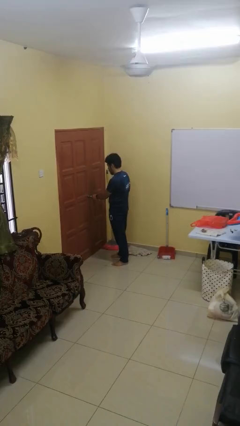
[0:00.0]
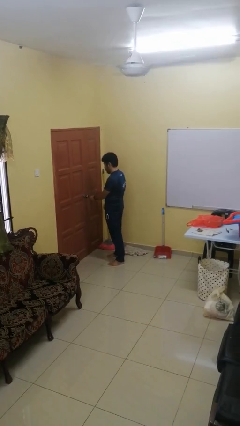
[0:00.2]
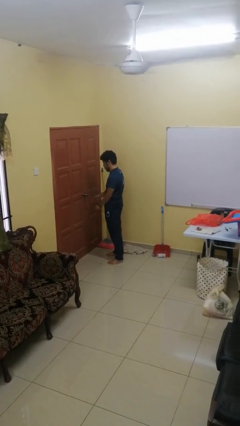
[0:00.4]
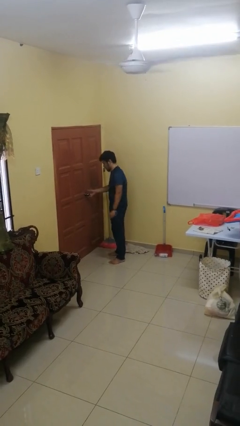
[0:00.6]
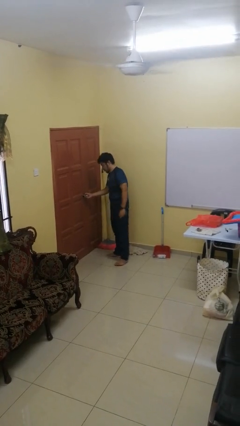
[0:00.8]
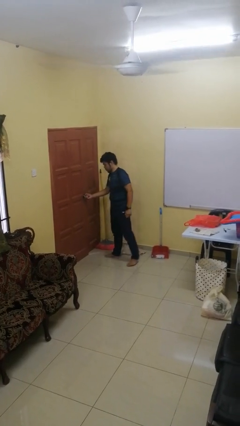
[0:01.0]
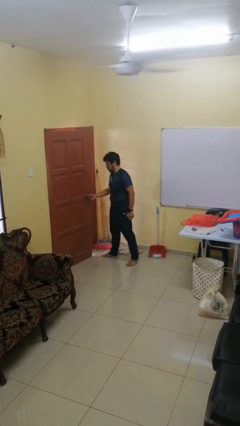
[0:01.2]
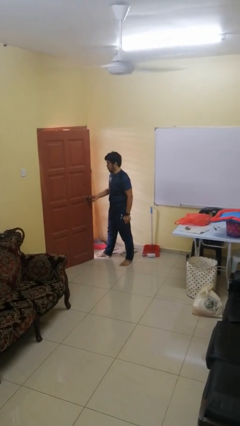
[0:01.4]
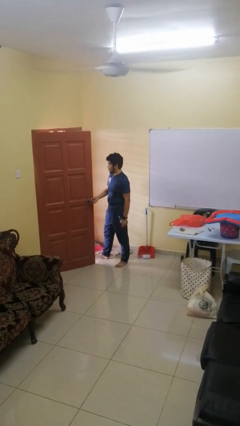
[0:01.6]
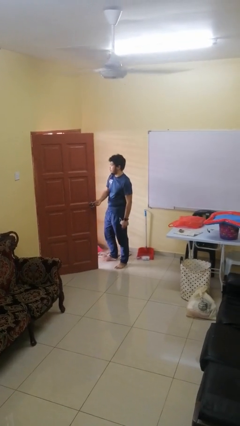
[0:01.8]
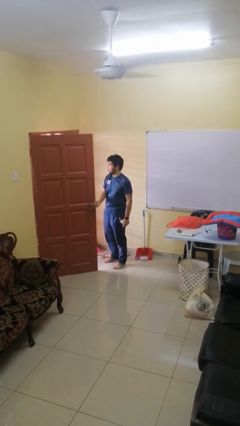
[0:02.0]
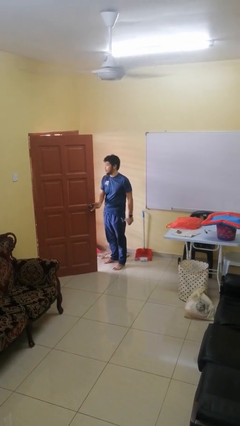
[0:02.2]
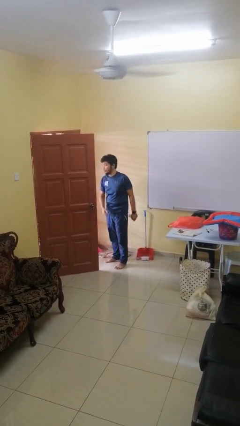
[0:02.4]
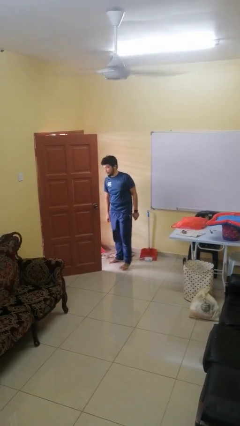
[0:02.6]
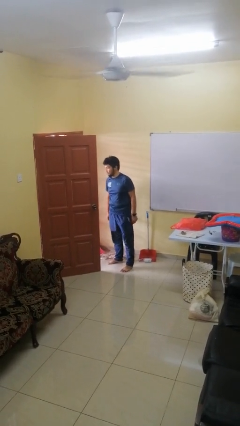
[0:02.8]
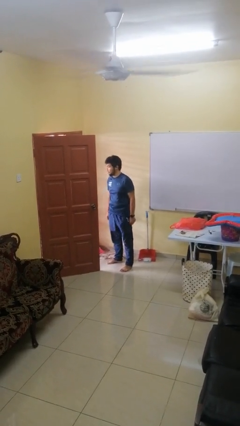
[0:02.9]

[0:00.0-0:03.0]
person opens facility door

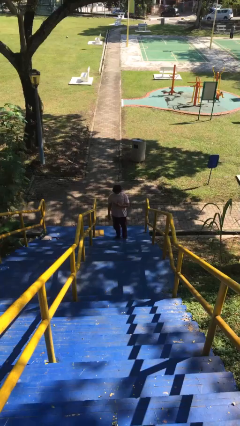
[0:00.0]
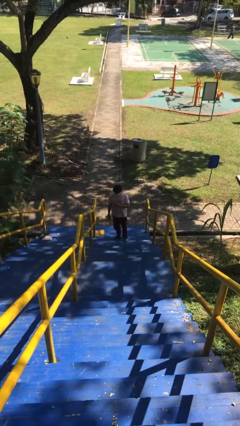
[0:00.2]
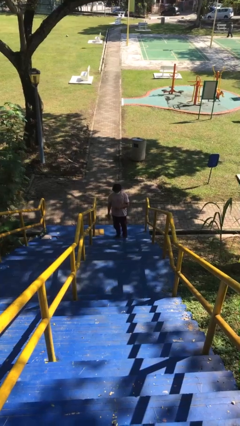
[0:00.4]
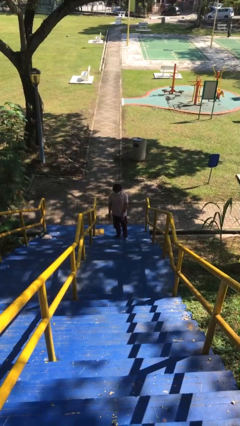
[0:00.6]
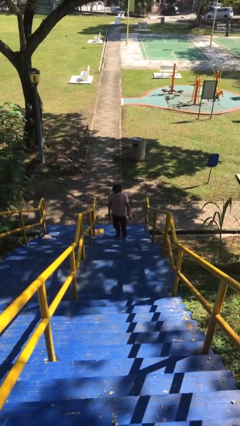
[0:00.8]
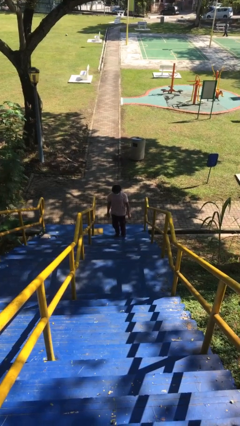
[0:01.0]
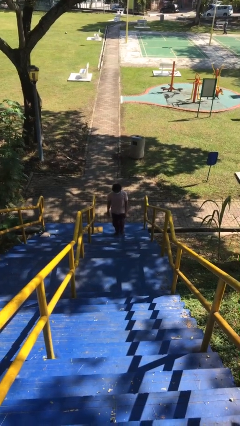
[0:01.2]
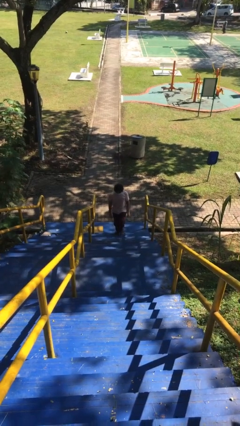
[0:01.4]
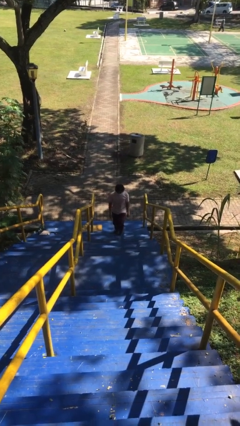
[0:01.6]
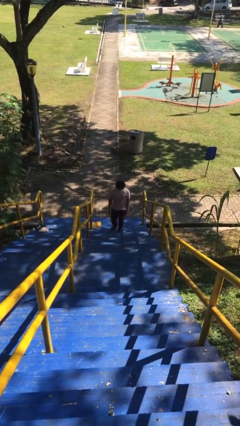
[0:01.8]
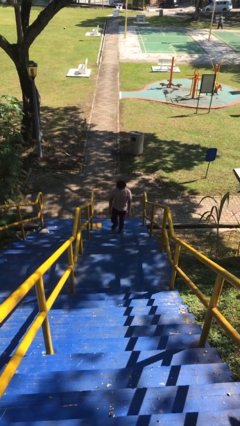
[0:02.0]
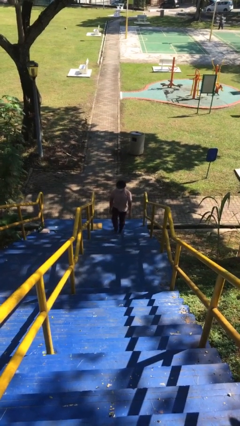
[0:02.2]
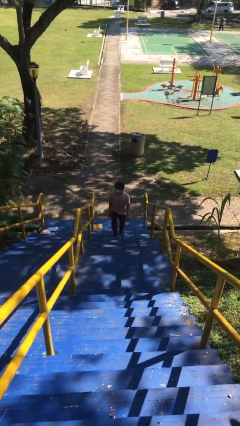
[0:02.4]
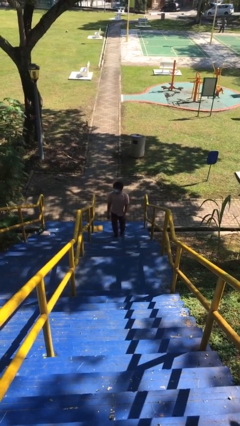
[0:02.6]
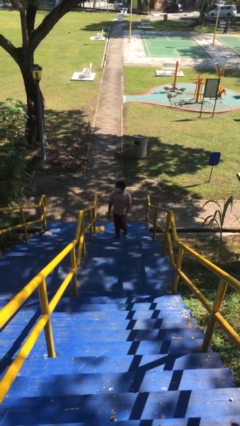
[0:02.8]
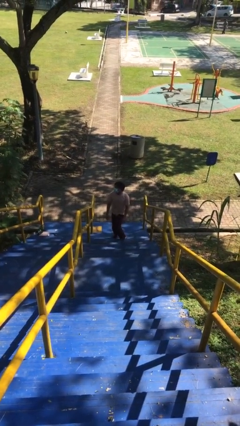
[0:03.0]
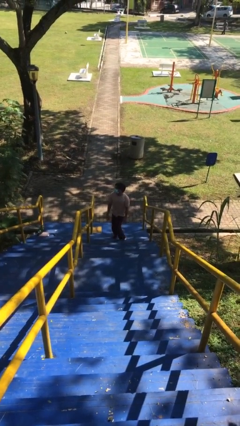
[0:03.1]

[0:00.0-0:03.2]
person climbs up stairs

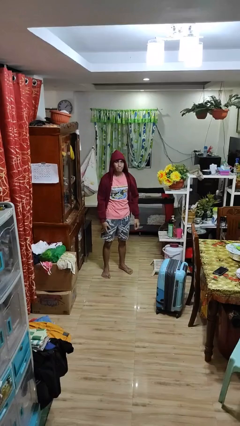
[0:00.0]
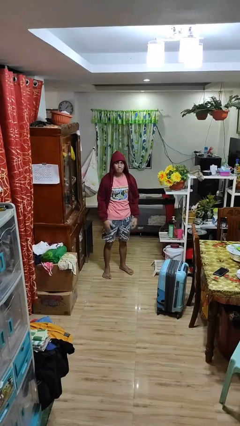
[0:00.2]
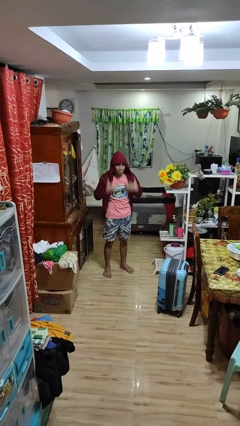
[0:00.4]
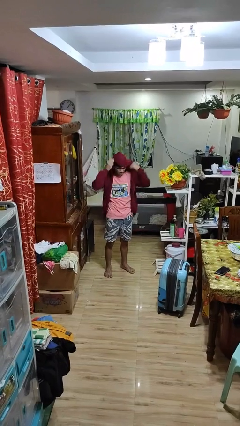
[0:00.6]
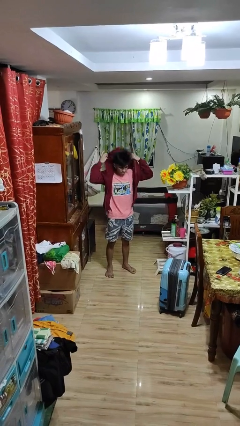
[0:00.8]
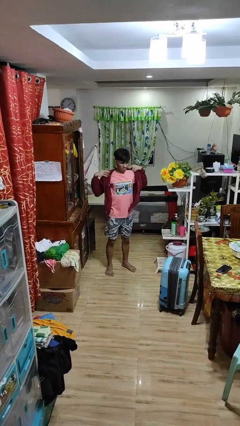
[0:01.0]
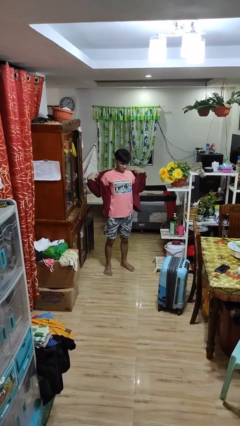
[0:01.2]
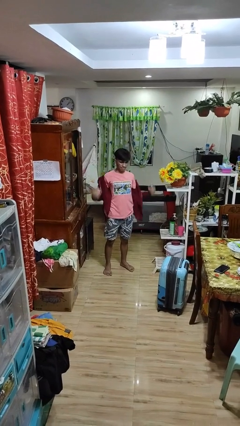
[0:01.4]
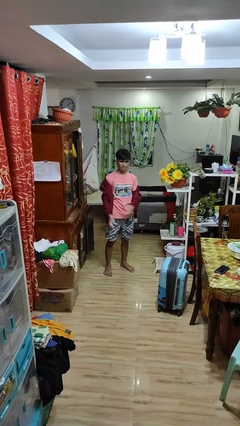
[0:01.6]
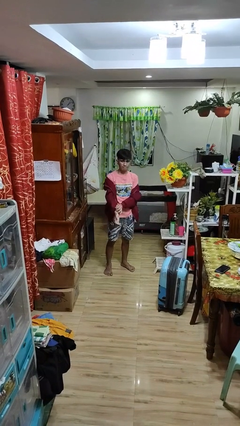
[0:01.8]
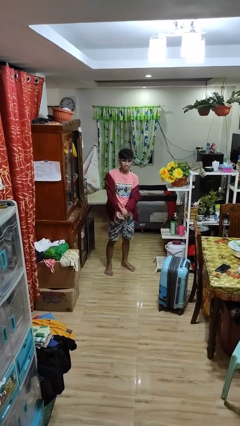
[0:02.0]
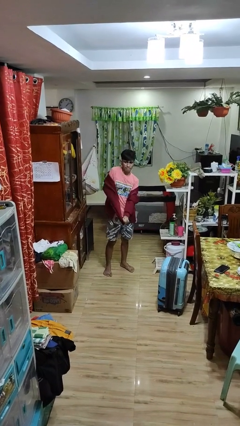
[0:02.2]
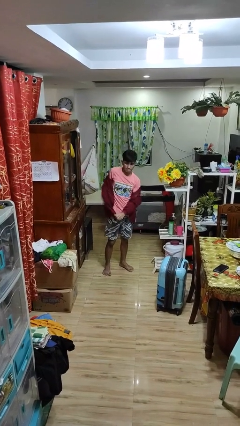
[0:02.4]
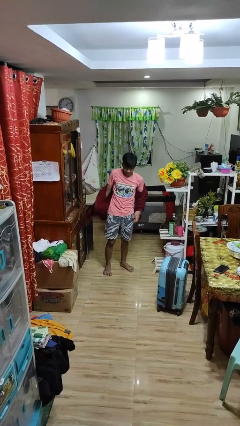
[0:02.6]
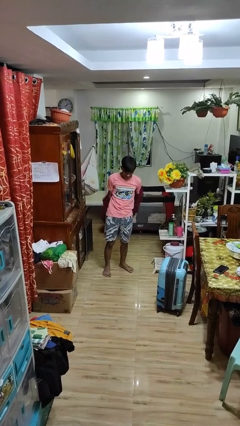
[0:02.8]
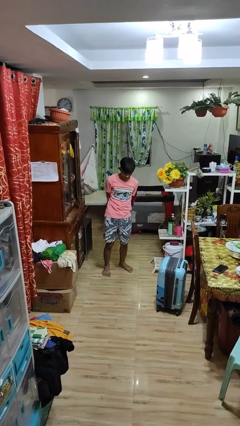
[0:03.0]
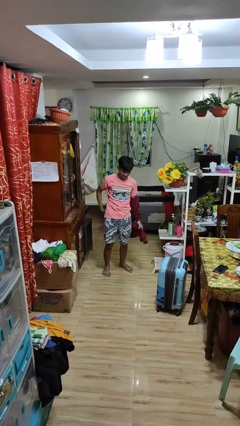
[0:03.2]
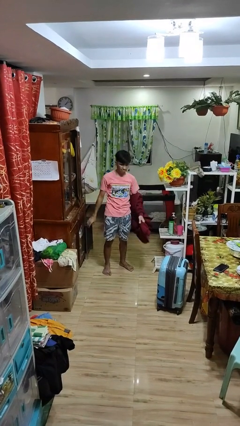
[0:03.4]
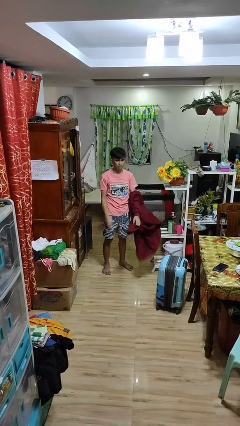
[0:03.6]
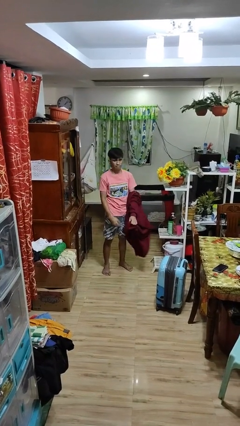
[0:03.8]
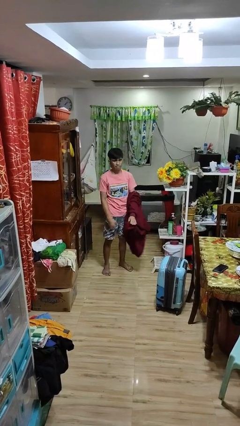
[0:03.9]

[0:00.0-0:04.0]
person takes off hoodie

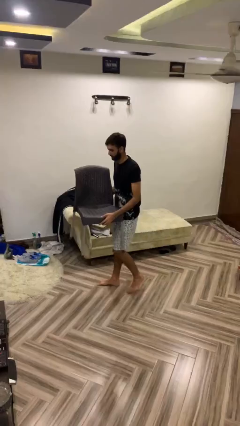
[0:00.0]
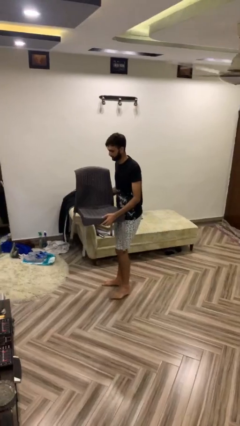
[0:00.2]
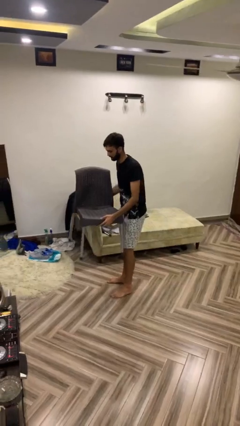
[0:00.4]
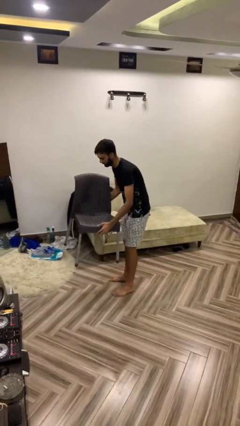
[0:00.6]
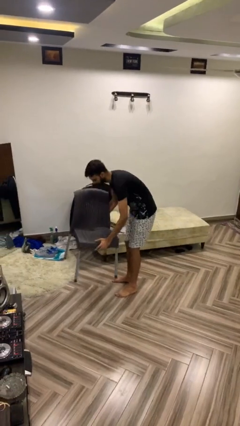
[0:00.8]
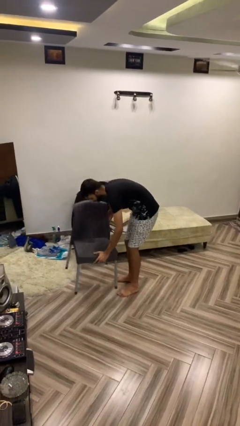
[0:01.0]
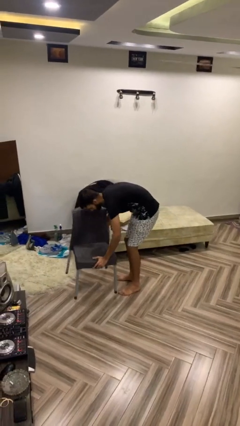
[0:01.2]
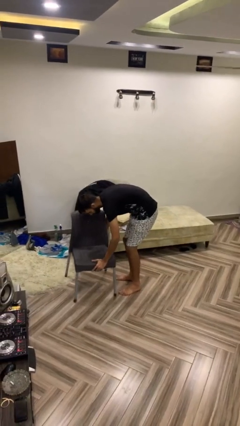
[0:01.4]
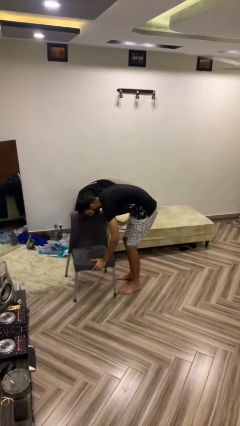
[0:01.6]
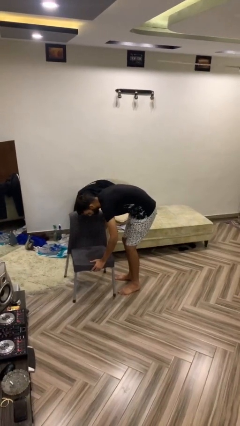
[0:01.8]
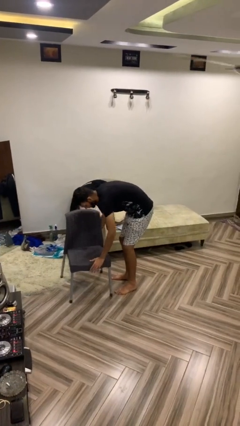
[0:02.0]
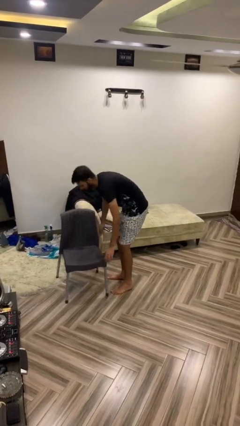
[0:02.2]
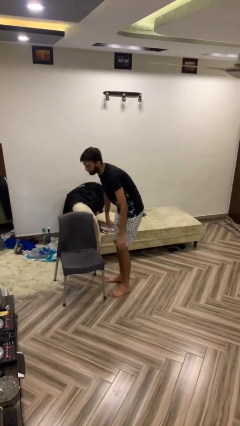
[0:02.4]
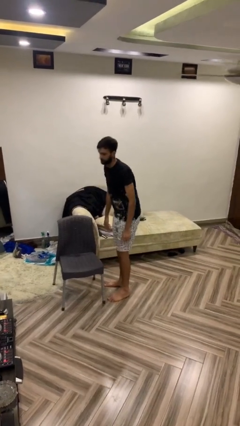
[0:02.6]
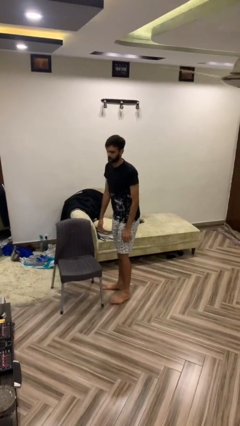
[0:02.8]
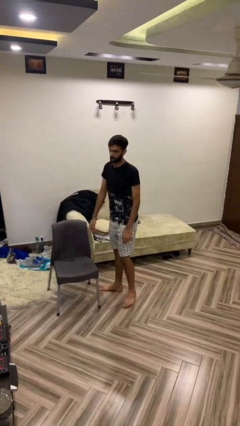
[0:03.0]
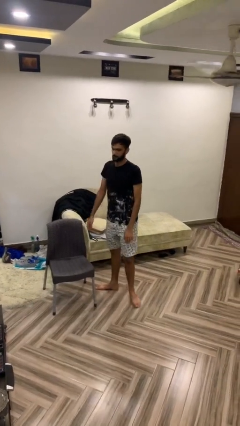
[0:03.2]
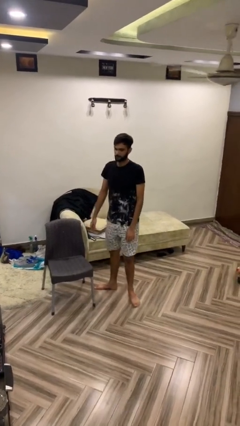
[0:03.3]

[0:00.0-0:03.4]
person puts down object on floor

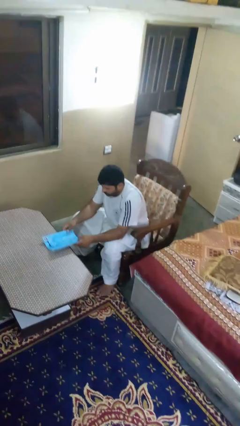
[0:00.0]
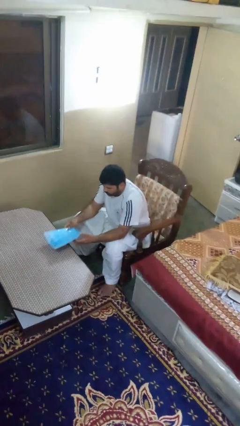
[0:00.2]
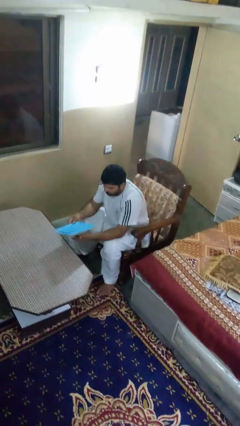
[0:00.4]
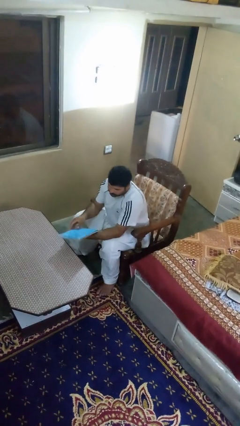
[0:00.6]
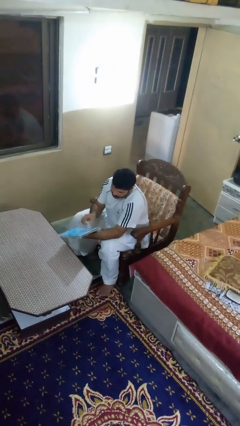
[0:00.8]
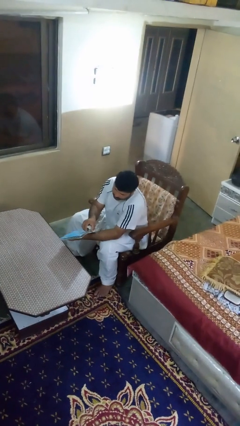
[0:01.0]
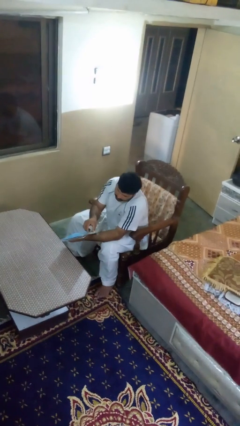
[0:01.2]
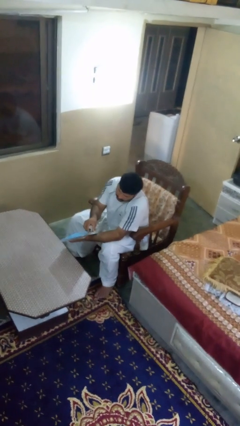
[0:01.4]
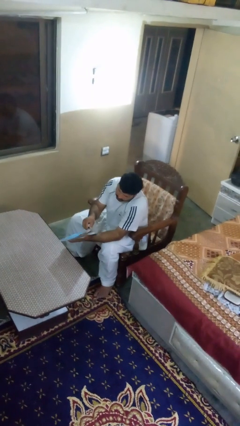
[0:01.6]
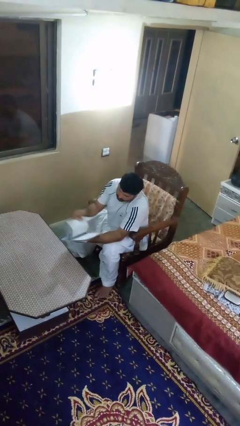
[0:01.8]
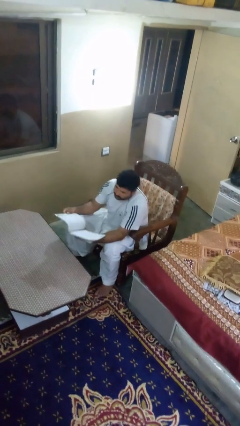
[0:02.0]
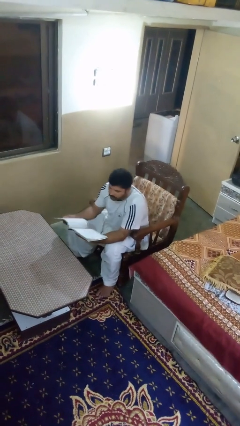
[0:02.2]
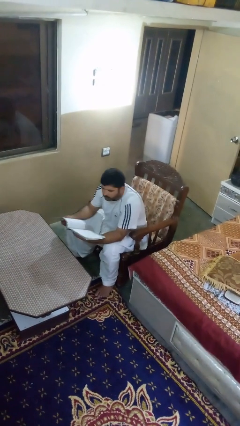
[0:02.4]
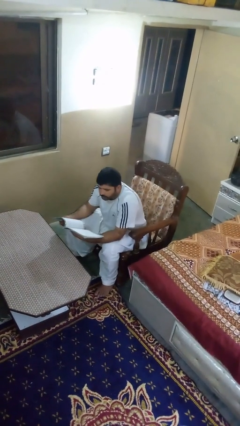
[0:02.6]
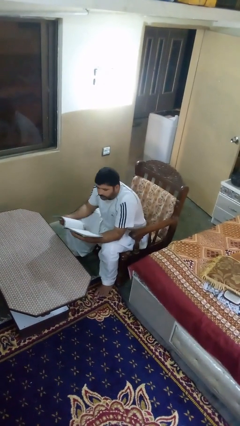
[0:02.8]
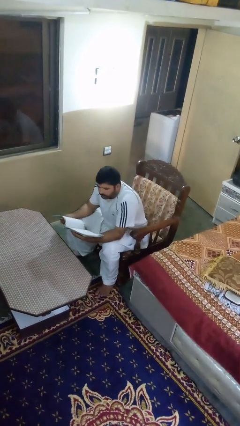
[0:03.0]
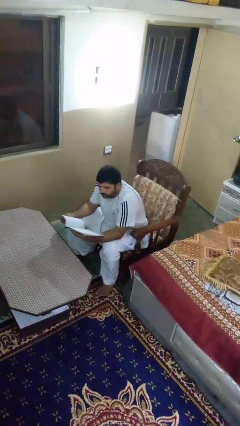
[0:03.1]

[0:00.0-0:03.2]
person reads magazine

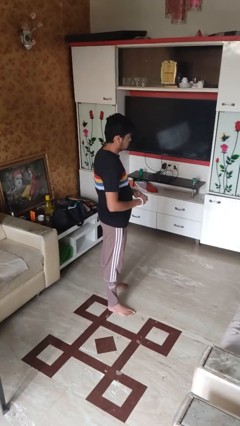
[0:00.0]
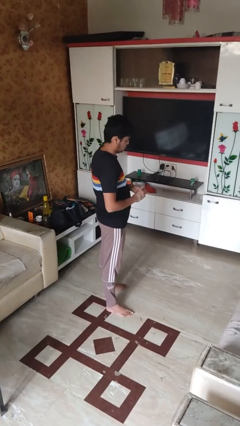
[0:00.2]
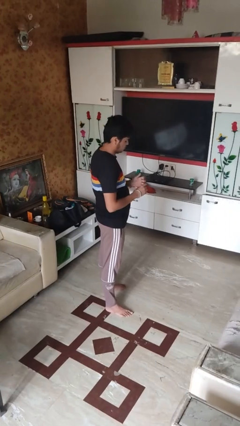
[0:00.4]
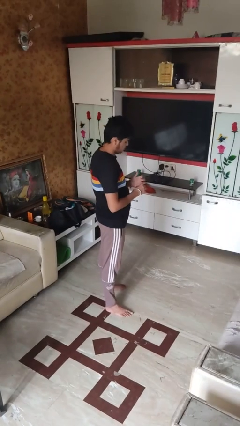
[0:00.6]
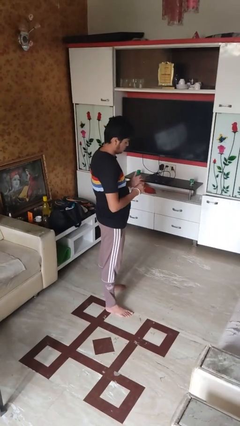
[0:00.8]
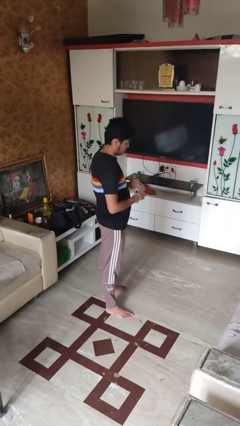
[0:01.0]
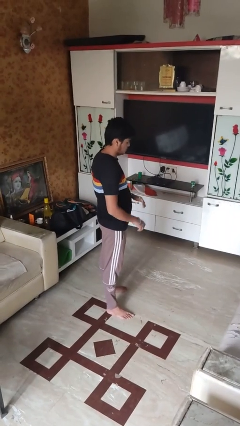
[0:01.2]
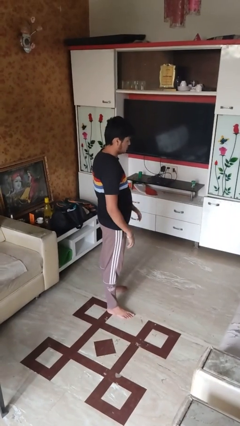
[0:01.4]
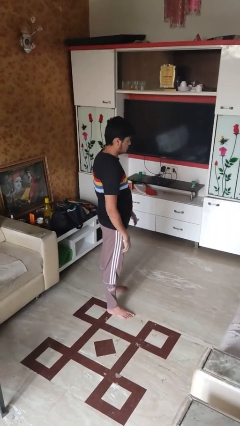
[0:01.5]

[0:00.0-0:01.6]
person puts on ring
